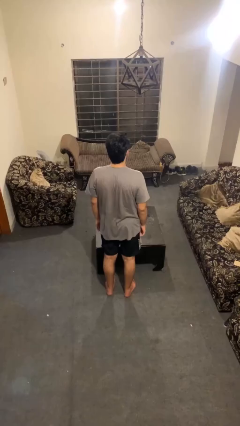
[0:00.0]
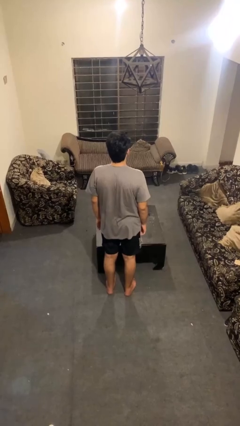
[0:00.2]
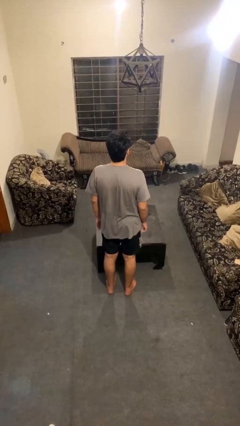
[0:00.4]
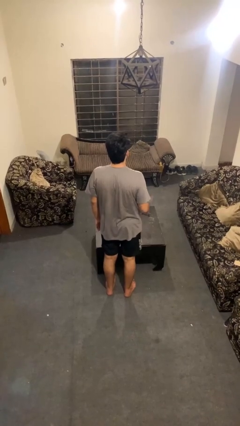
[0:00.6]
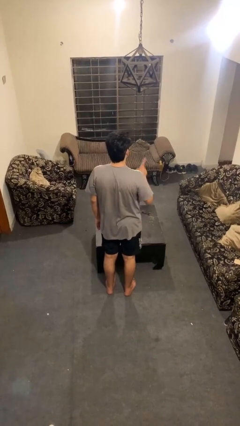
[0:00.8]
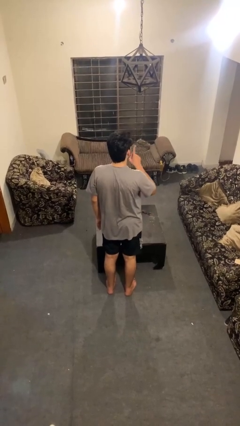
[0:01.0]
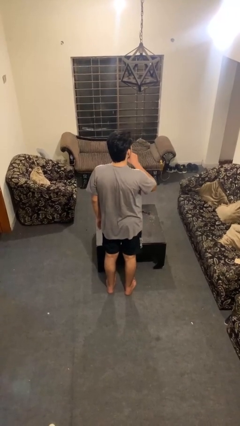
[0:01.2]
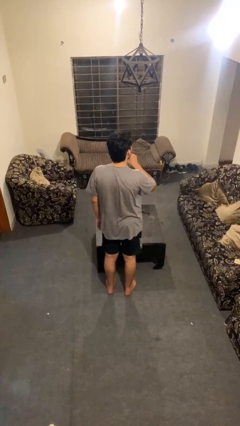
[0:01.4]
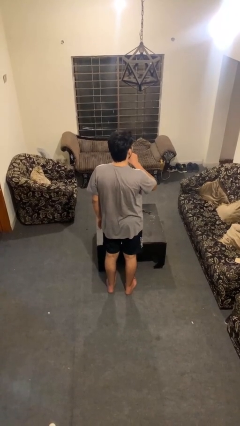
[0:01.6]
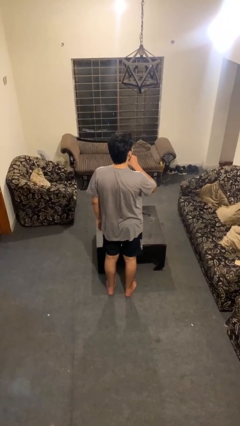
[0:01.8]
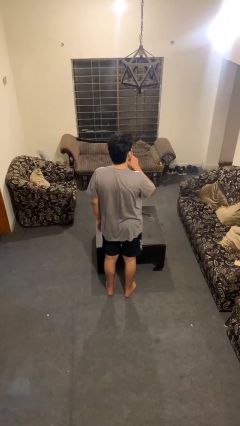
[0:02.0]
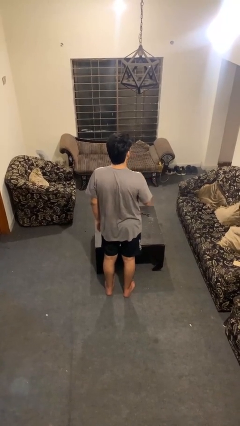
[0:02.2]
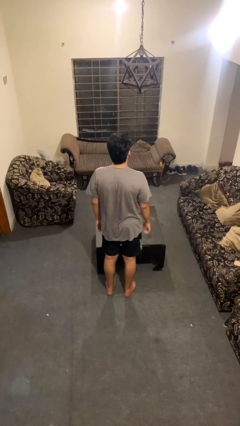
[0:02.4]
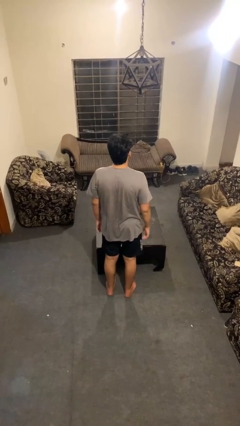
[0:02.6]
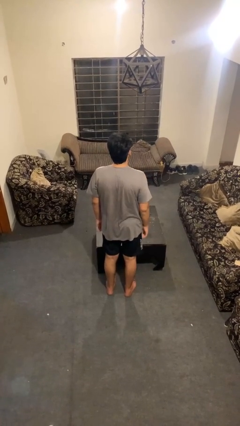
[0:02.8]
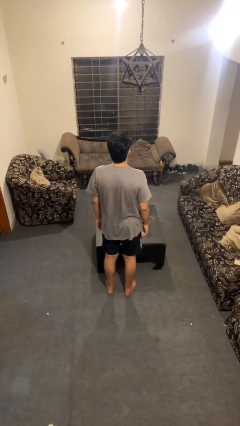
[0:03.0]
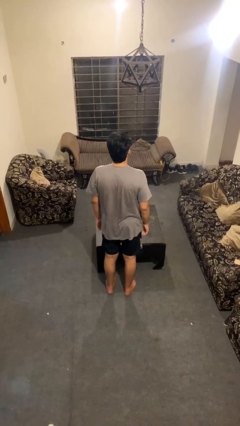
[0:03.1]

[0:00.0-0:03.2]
person gestures be quiet

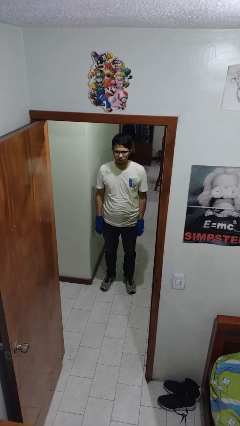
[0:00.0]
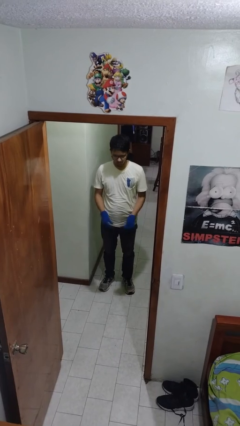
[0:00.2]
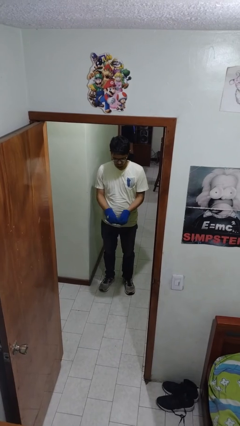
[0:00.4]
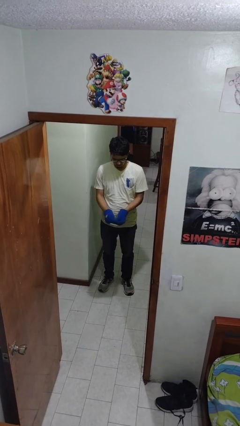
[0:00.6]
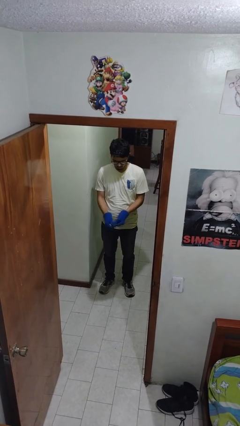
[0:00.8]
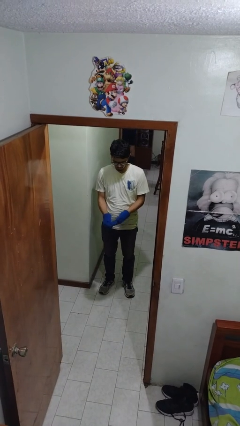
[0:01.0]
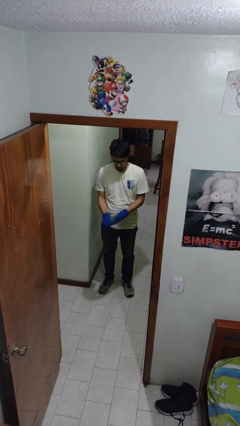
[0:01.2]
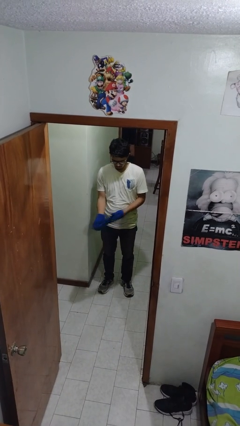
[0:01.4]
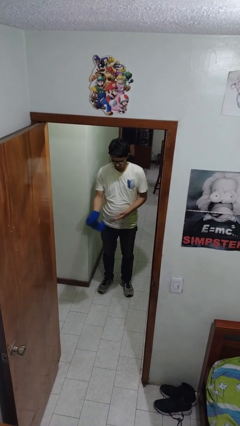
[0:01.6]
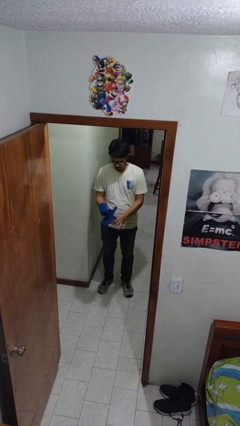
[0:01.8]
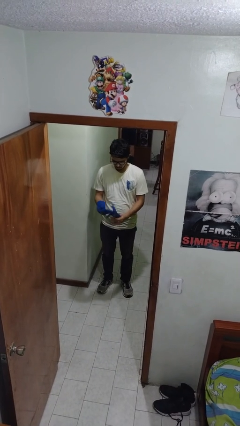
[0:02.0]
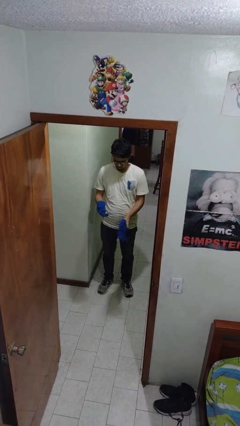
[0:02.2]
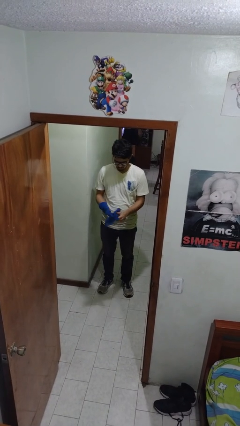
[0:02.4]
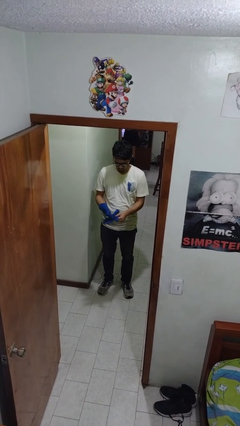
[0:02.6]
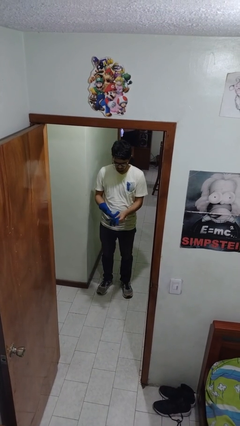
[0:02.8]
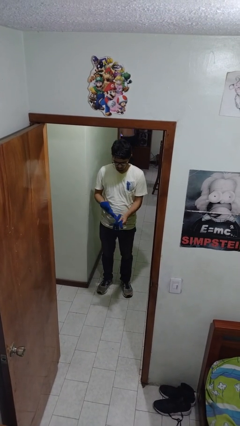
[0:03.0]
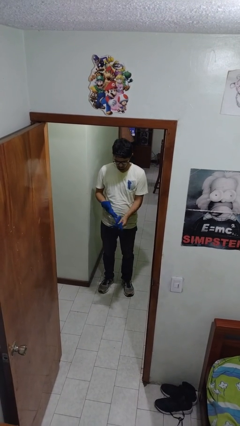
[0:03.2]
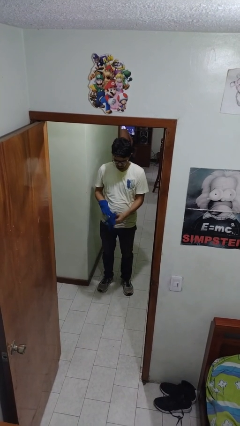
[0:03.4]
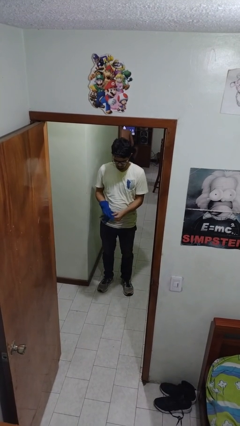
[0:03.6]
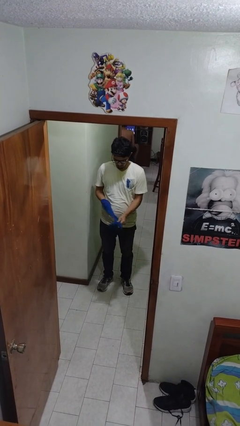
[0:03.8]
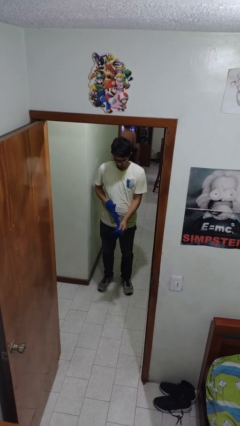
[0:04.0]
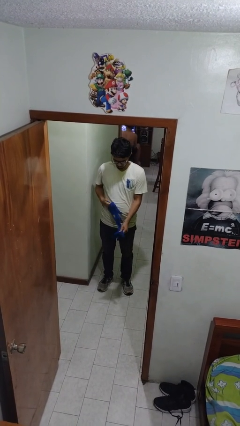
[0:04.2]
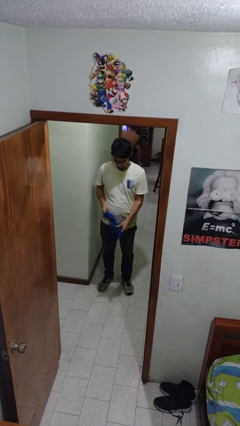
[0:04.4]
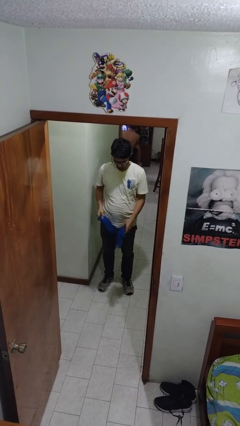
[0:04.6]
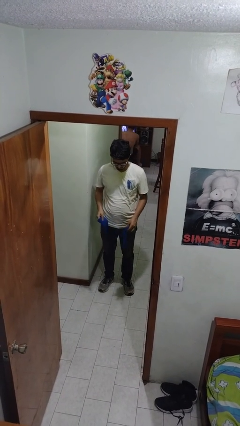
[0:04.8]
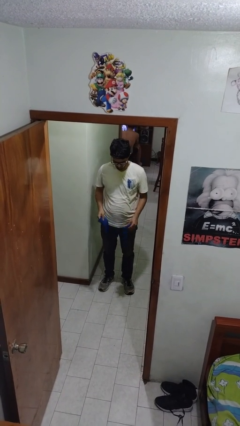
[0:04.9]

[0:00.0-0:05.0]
person takes off gloves

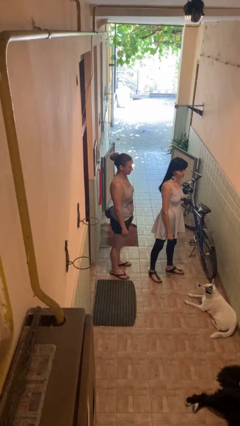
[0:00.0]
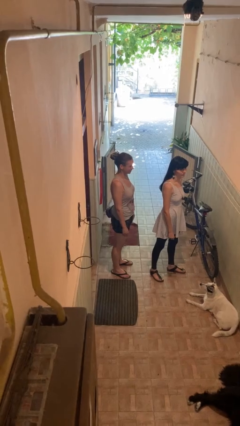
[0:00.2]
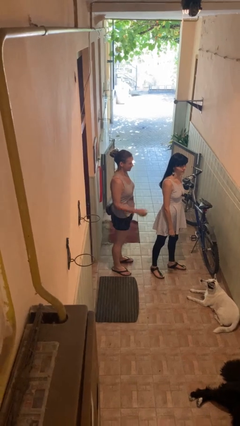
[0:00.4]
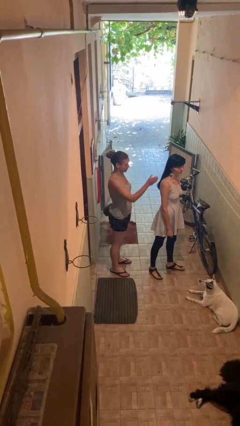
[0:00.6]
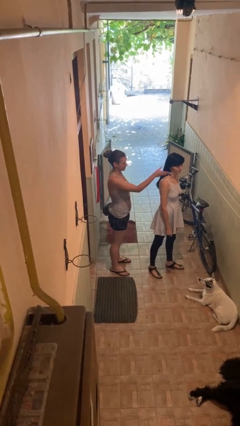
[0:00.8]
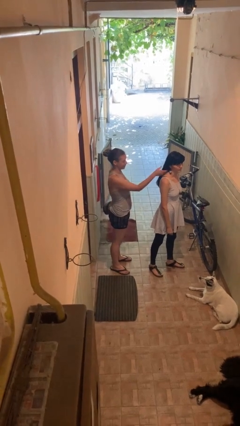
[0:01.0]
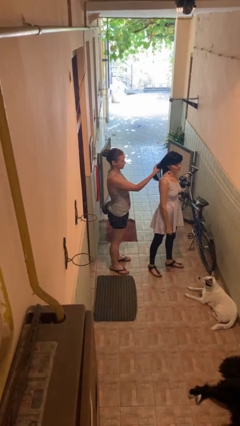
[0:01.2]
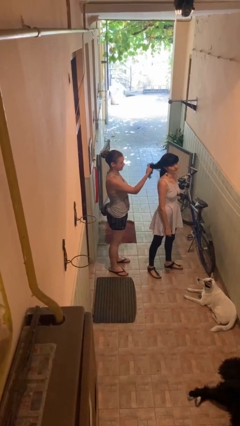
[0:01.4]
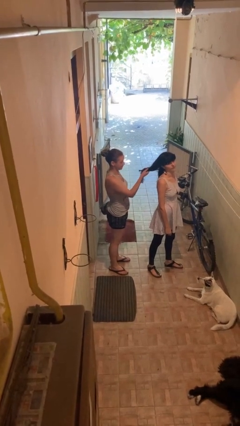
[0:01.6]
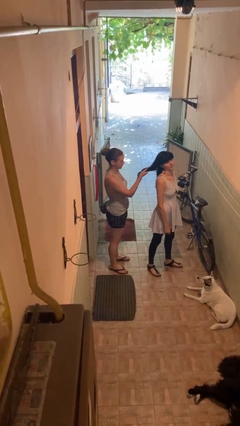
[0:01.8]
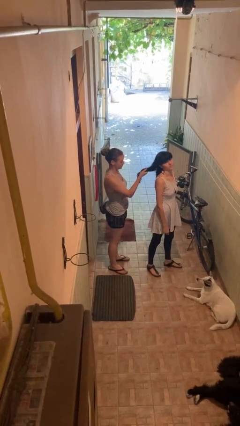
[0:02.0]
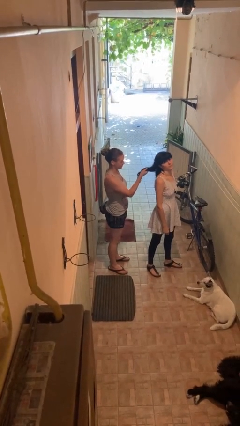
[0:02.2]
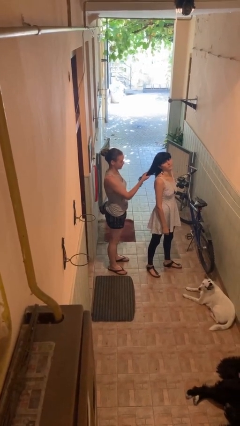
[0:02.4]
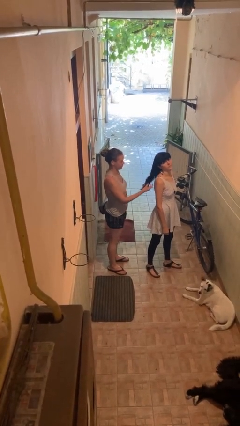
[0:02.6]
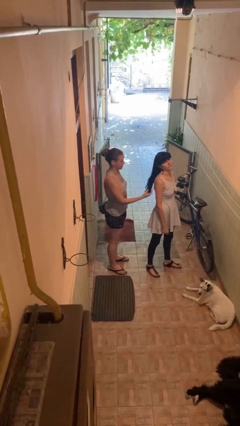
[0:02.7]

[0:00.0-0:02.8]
person grabs person by hair

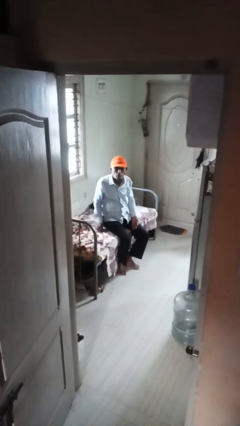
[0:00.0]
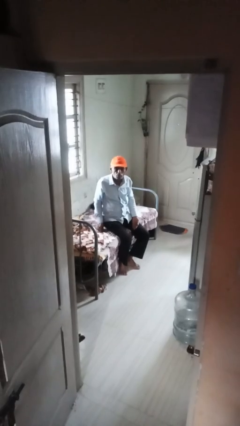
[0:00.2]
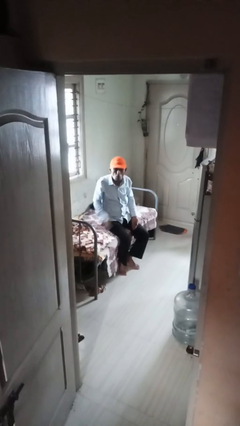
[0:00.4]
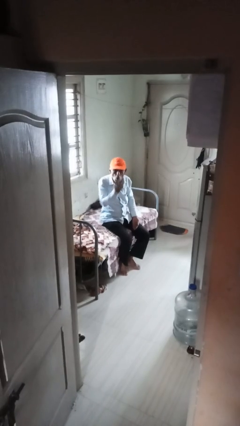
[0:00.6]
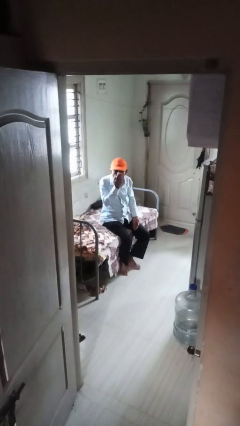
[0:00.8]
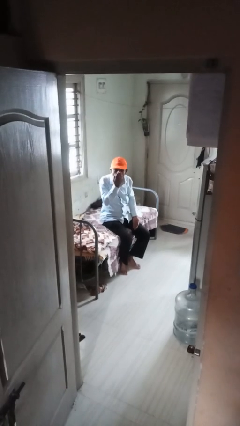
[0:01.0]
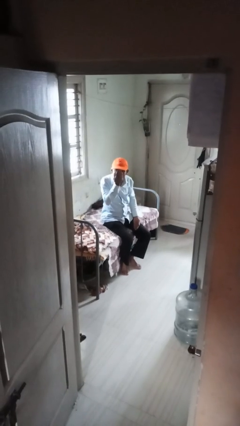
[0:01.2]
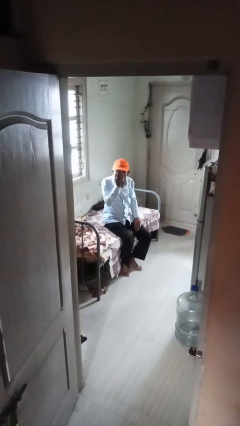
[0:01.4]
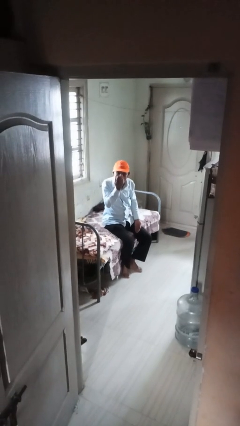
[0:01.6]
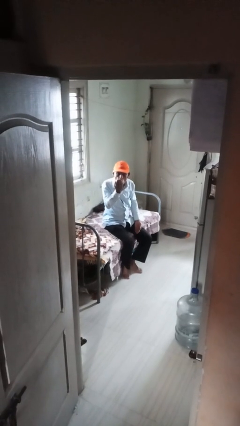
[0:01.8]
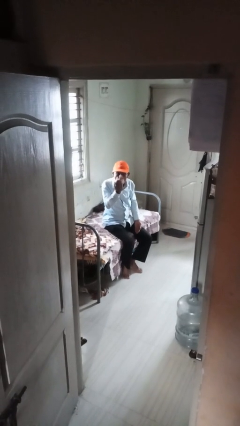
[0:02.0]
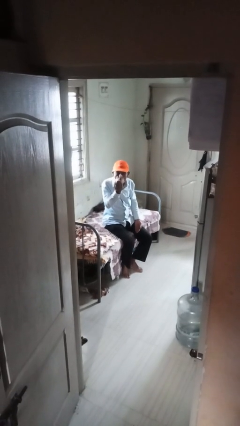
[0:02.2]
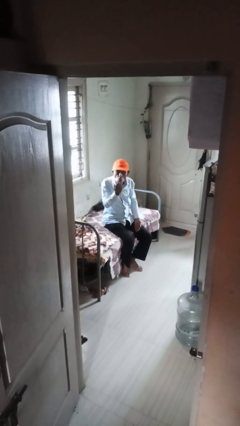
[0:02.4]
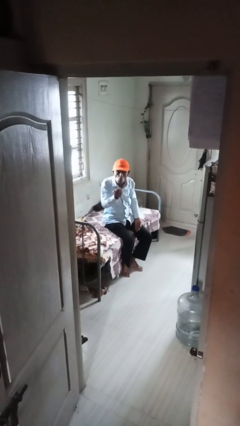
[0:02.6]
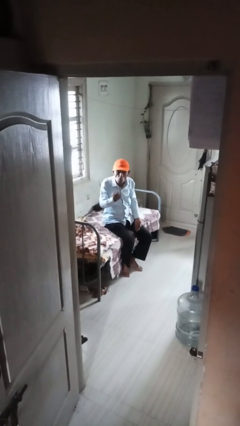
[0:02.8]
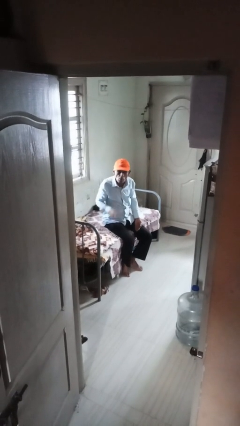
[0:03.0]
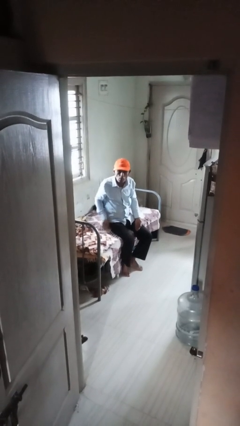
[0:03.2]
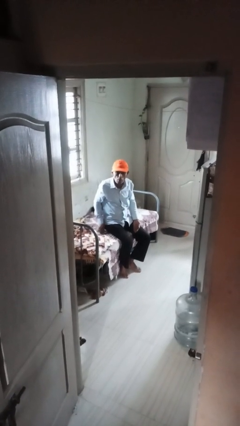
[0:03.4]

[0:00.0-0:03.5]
person gestures blow kiss

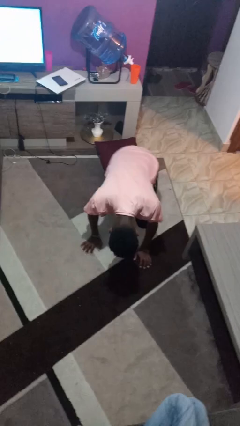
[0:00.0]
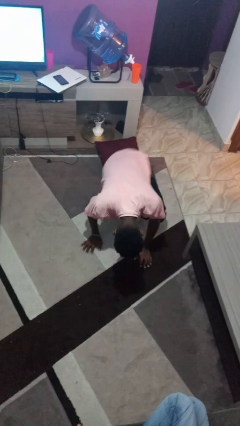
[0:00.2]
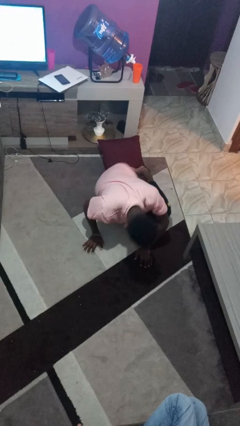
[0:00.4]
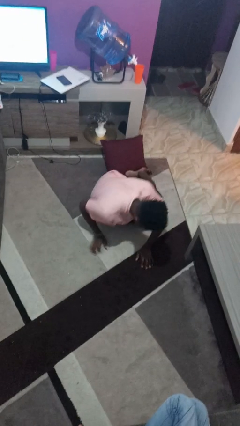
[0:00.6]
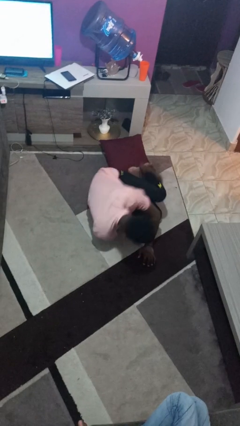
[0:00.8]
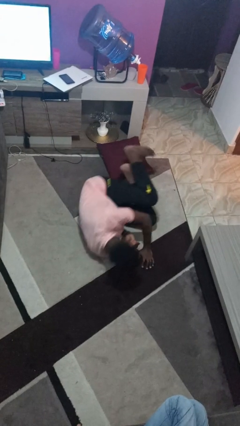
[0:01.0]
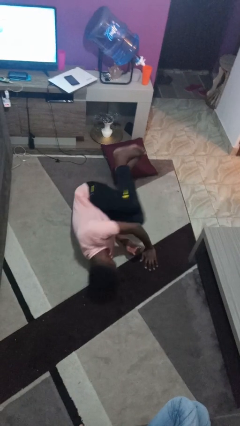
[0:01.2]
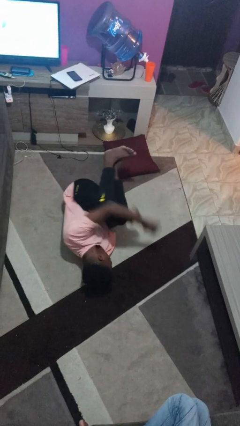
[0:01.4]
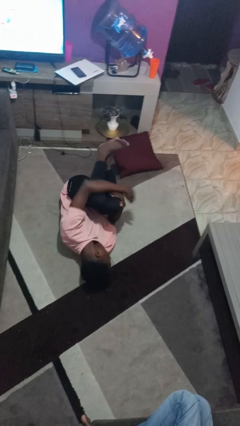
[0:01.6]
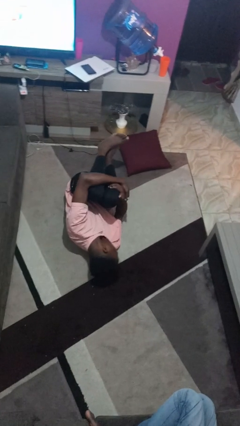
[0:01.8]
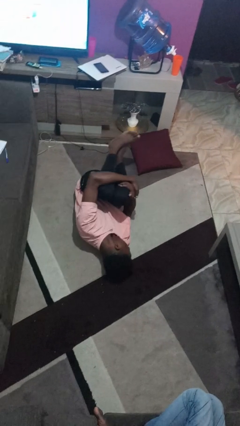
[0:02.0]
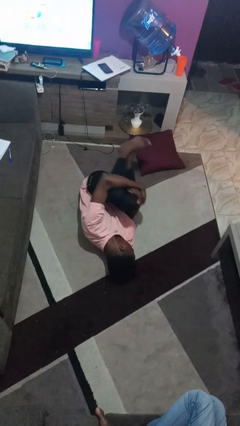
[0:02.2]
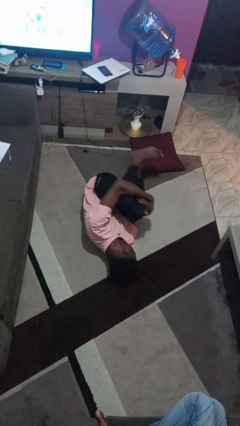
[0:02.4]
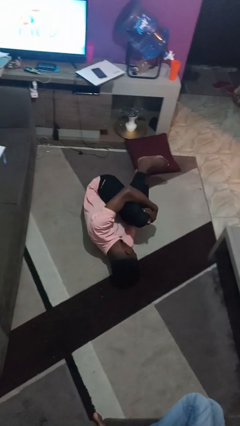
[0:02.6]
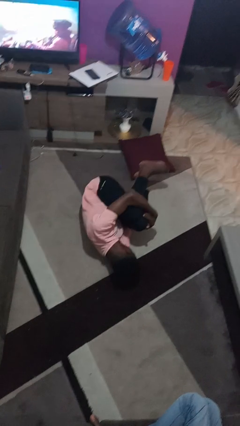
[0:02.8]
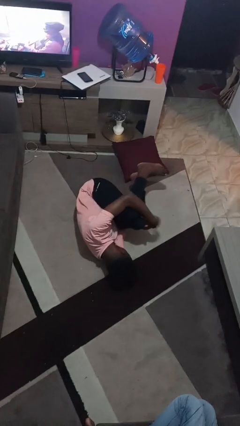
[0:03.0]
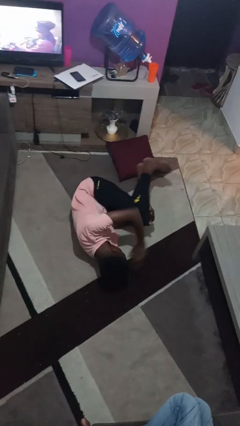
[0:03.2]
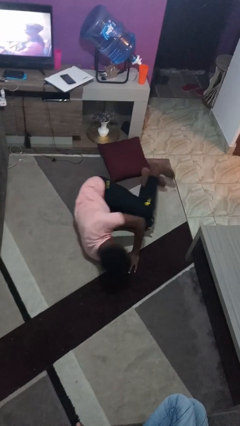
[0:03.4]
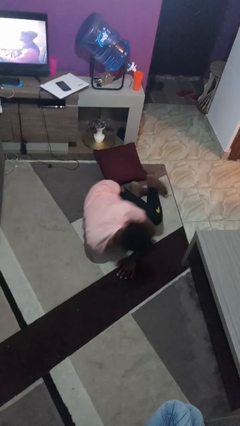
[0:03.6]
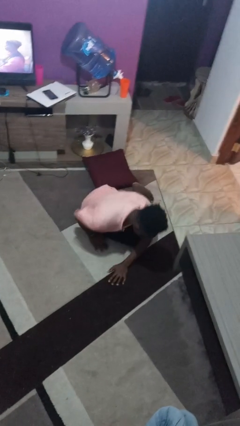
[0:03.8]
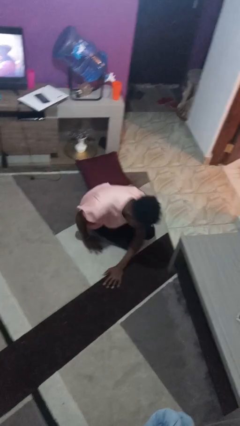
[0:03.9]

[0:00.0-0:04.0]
person lies down on floor
